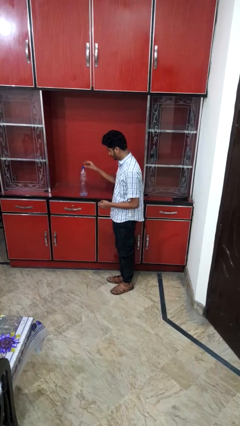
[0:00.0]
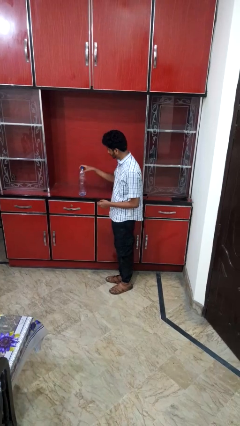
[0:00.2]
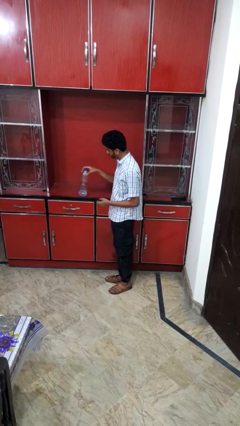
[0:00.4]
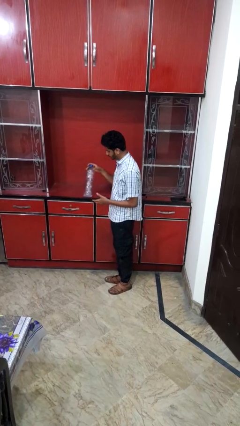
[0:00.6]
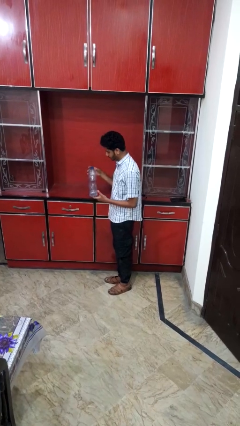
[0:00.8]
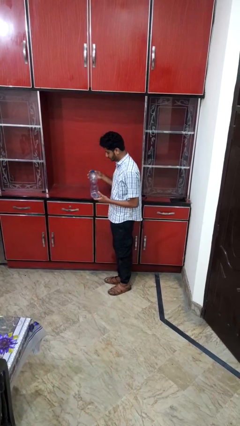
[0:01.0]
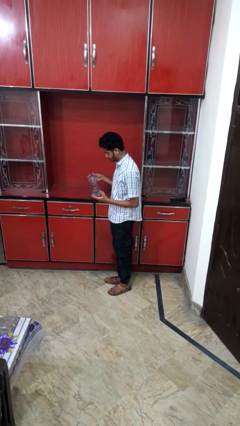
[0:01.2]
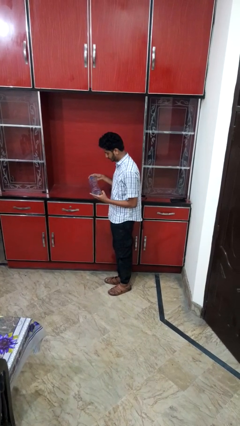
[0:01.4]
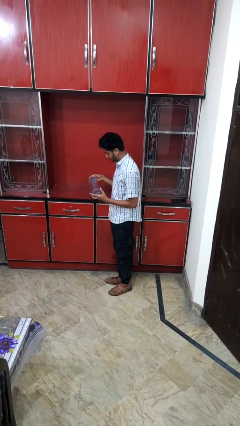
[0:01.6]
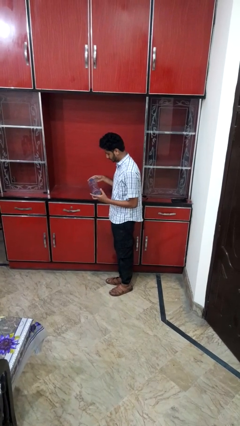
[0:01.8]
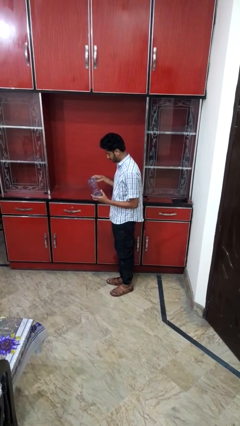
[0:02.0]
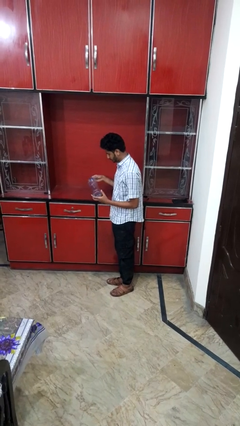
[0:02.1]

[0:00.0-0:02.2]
person picks up object from countertop

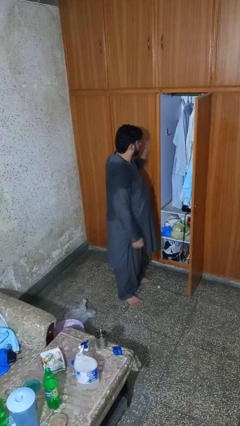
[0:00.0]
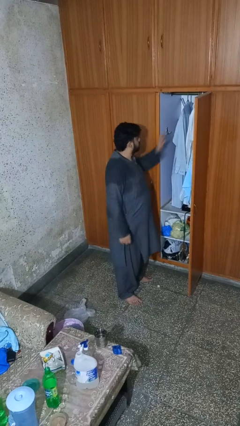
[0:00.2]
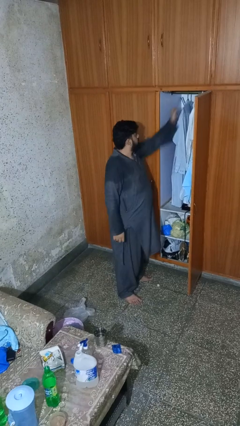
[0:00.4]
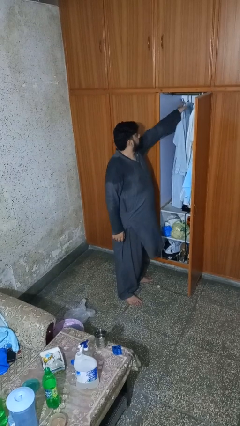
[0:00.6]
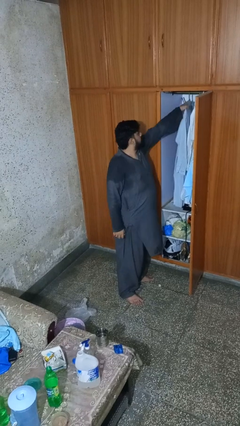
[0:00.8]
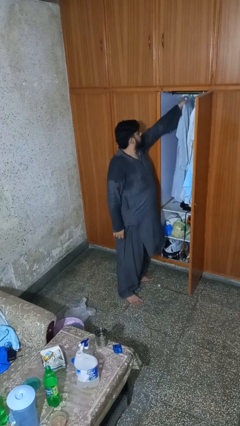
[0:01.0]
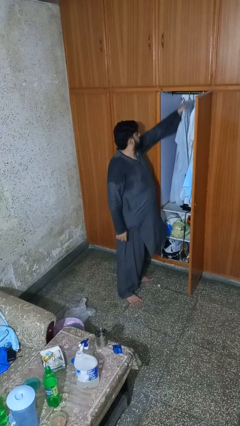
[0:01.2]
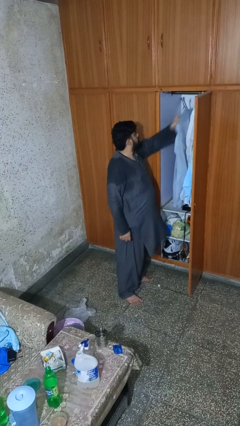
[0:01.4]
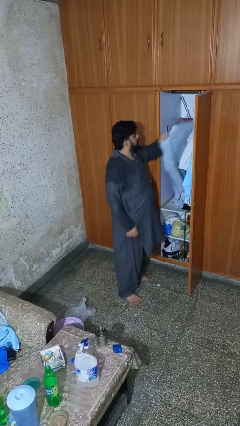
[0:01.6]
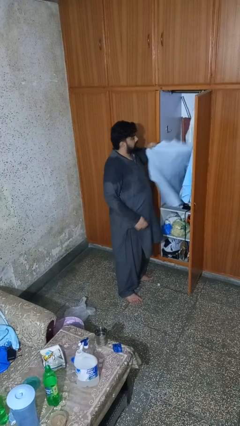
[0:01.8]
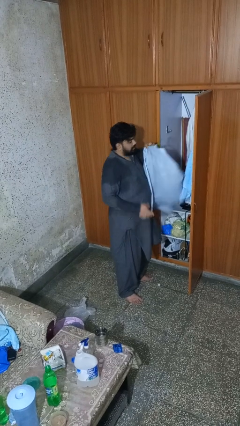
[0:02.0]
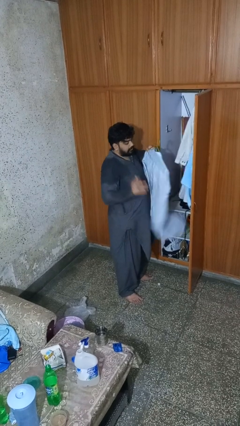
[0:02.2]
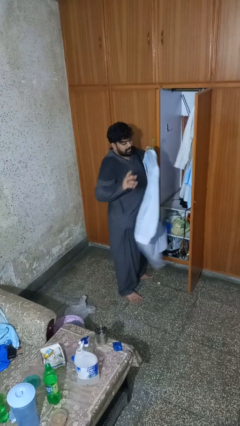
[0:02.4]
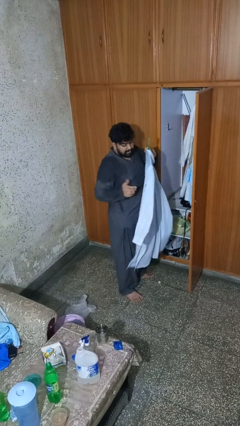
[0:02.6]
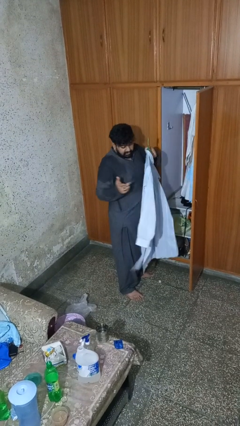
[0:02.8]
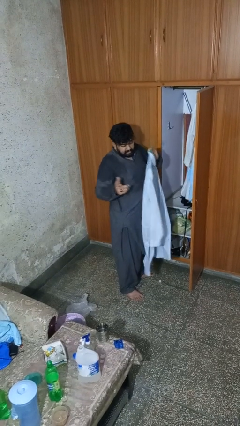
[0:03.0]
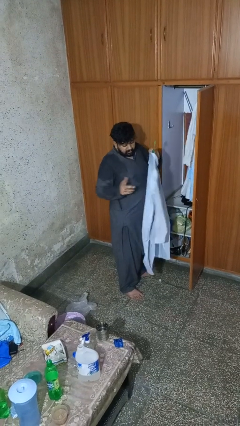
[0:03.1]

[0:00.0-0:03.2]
person takes clothes from closet

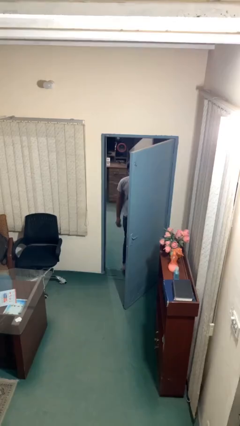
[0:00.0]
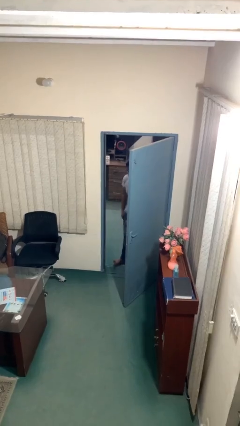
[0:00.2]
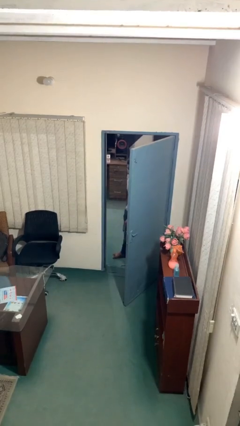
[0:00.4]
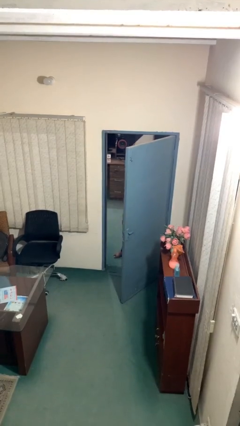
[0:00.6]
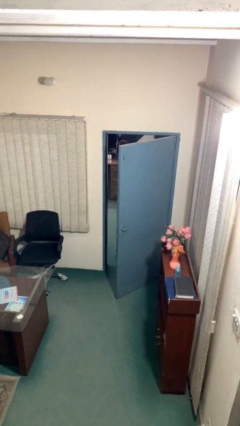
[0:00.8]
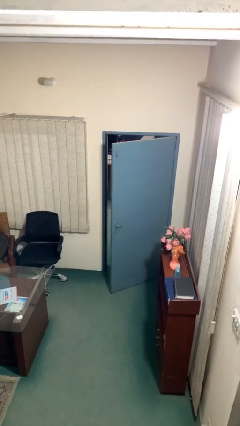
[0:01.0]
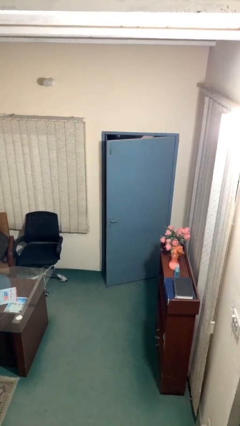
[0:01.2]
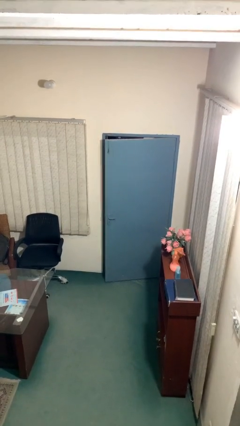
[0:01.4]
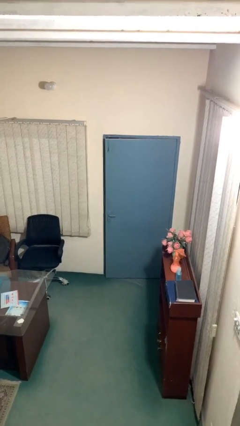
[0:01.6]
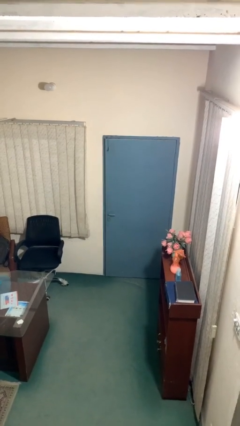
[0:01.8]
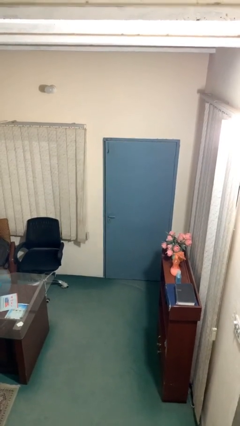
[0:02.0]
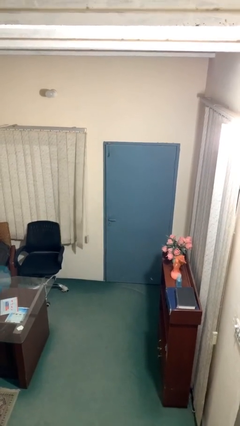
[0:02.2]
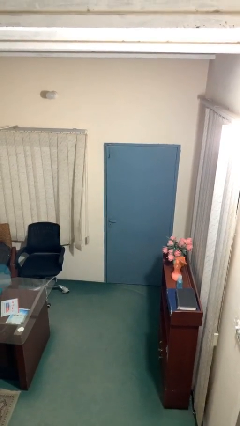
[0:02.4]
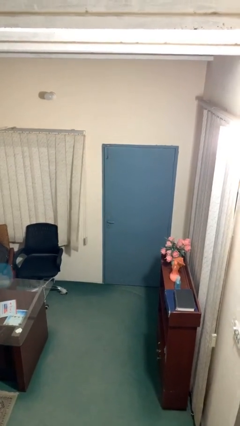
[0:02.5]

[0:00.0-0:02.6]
person closes facility door

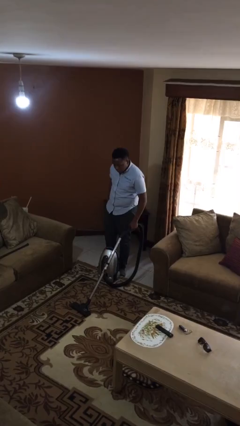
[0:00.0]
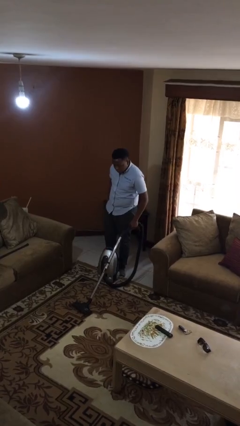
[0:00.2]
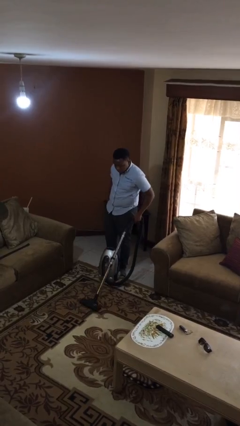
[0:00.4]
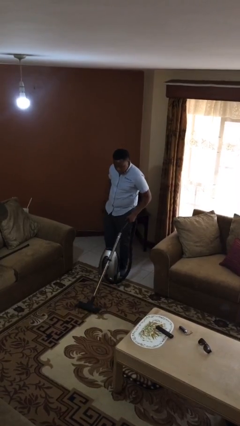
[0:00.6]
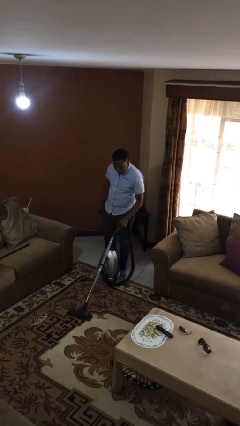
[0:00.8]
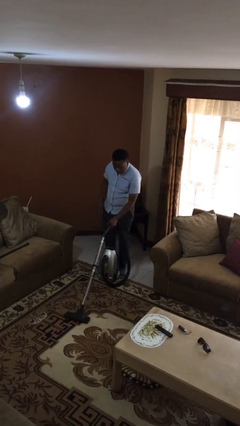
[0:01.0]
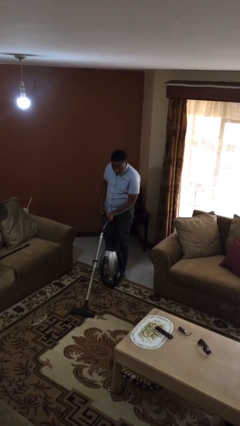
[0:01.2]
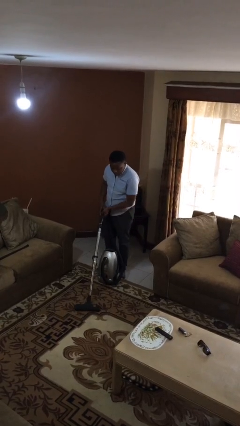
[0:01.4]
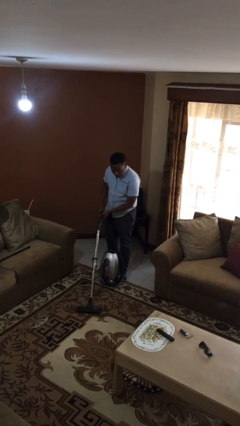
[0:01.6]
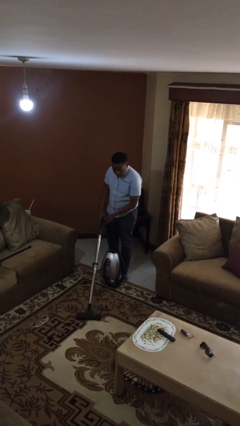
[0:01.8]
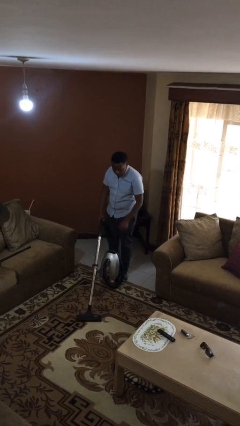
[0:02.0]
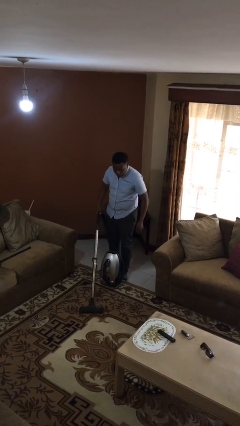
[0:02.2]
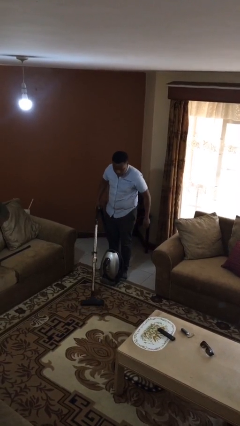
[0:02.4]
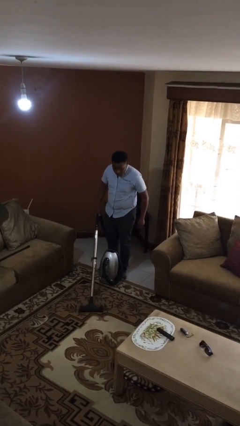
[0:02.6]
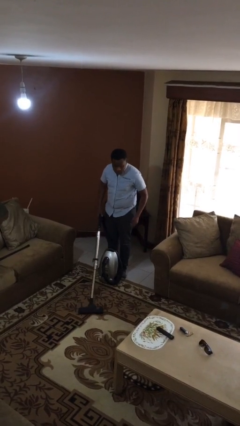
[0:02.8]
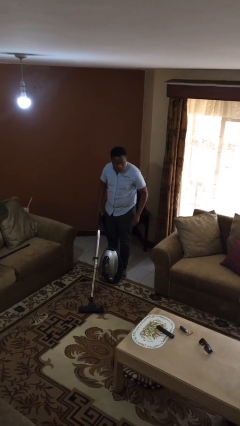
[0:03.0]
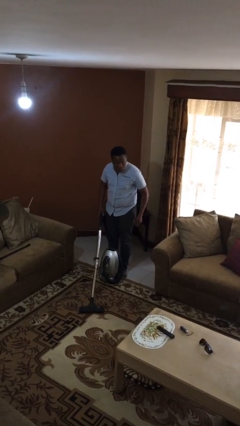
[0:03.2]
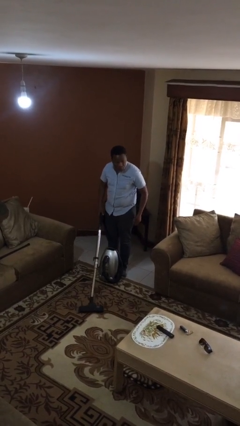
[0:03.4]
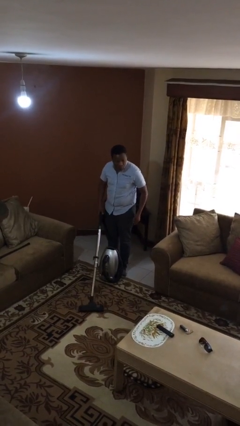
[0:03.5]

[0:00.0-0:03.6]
person vacuums carpet

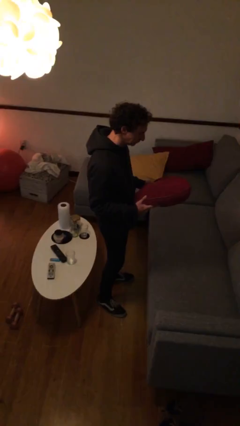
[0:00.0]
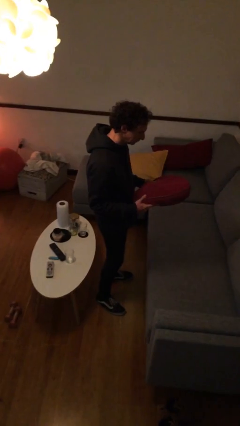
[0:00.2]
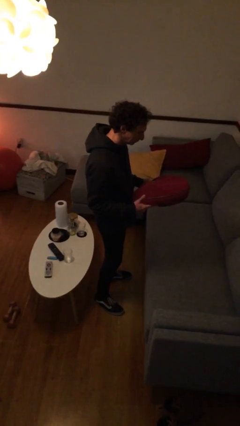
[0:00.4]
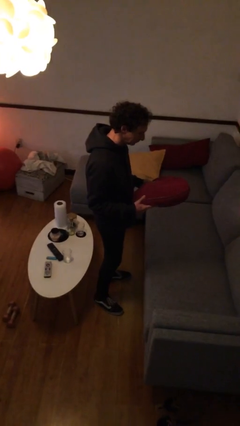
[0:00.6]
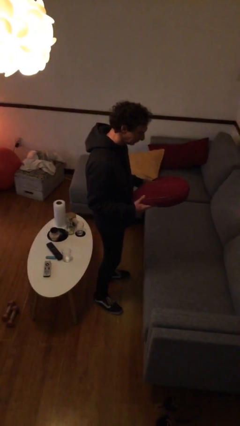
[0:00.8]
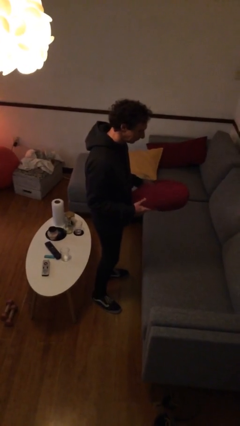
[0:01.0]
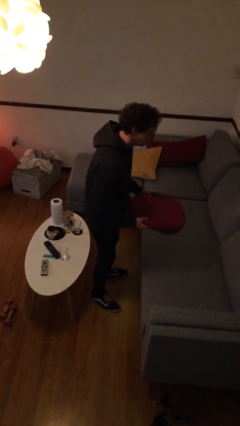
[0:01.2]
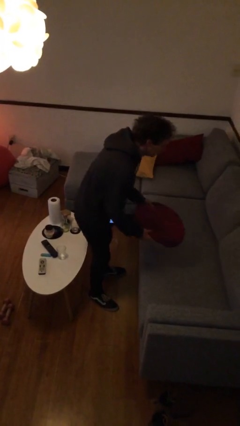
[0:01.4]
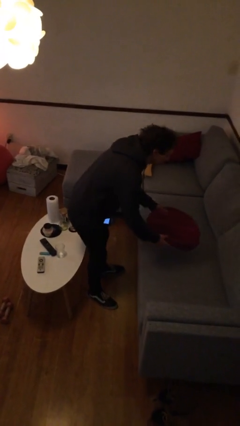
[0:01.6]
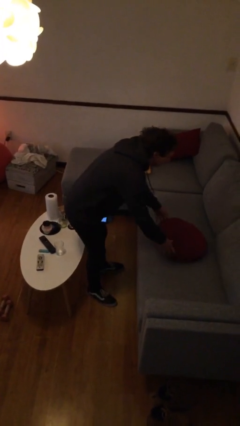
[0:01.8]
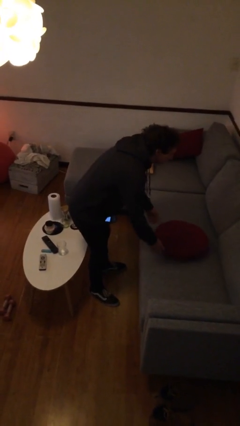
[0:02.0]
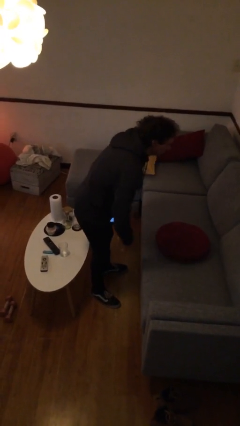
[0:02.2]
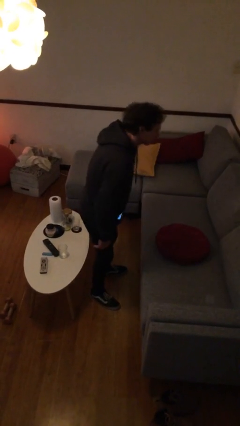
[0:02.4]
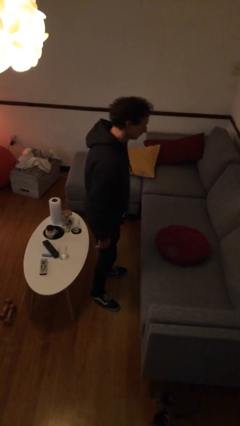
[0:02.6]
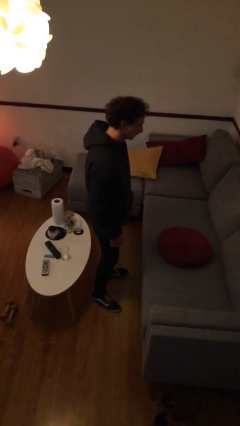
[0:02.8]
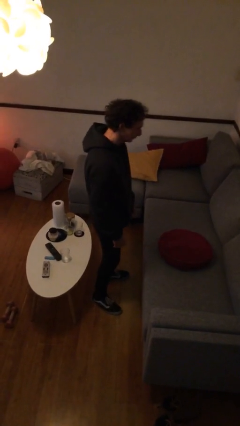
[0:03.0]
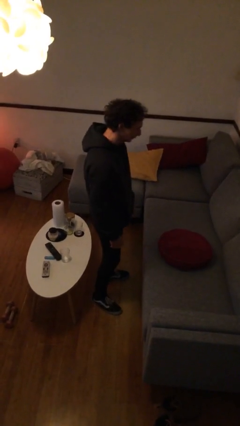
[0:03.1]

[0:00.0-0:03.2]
person puts down object on couch

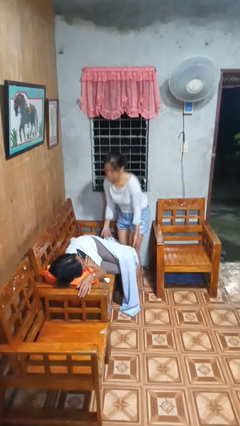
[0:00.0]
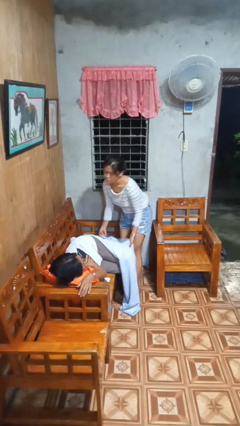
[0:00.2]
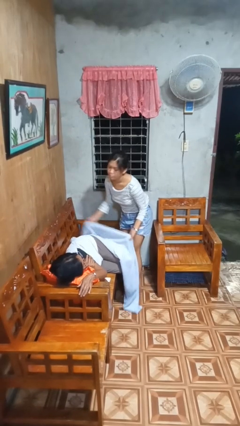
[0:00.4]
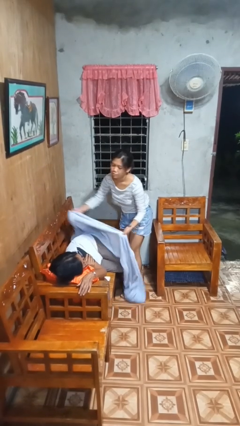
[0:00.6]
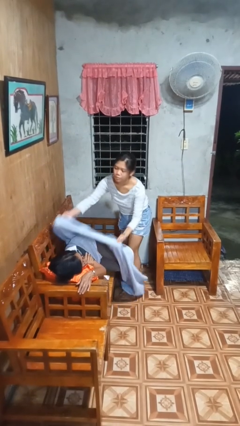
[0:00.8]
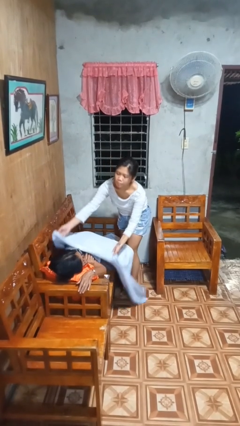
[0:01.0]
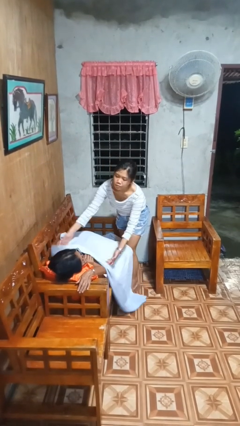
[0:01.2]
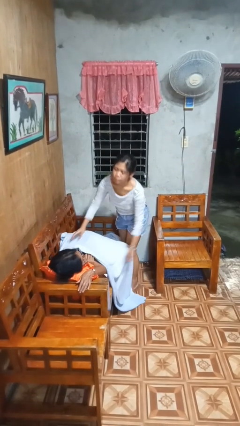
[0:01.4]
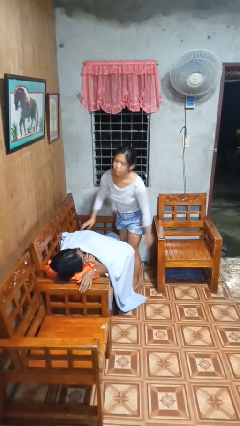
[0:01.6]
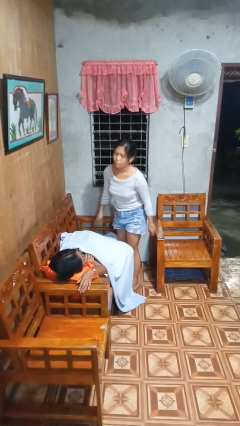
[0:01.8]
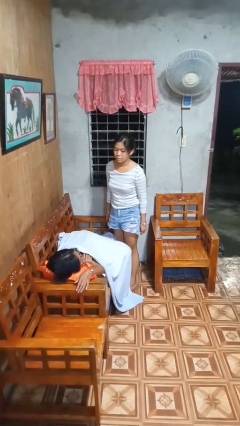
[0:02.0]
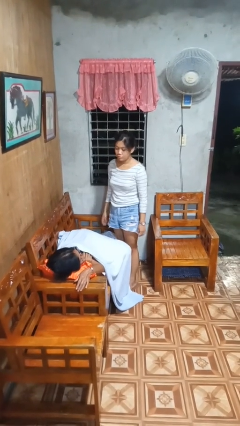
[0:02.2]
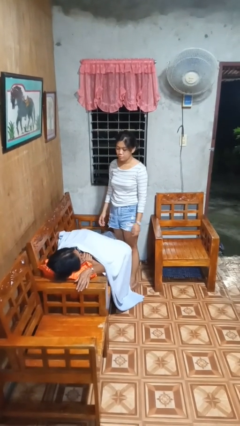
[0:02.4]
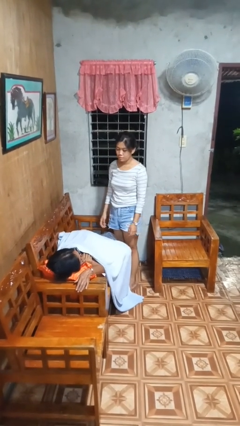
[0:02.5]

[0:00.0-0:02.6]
person covers friend with blanket
